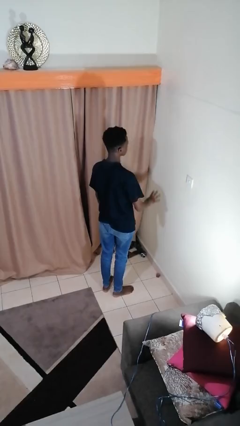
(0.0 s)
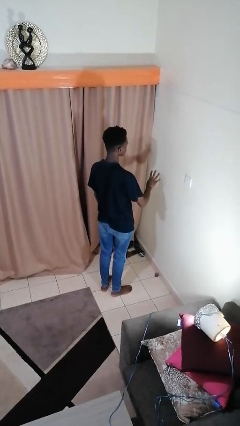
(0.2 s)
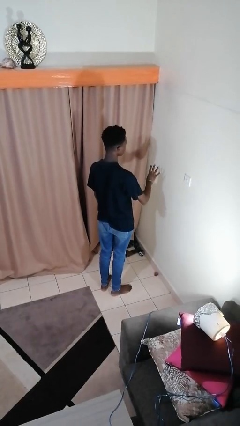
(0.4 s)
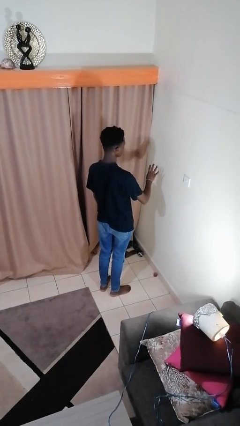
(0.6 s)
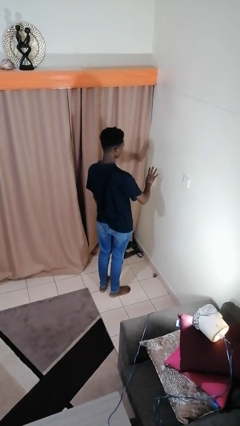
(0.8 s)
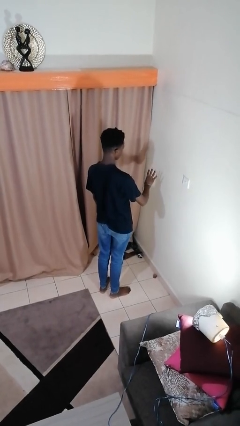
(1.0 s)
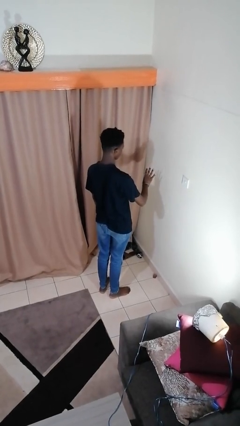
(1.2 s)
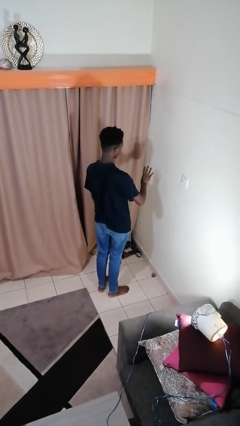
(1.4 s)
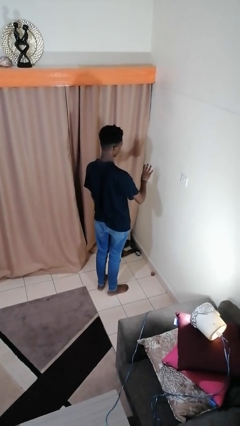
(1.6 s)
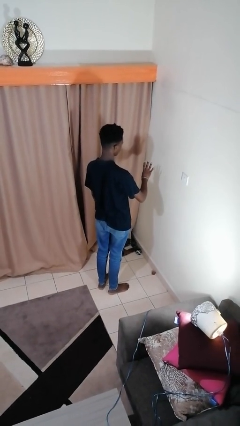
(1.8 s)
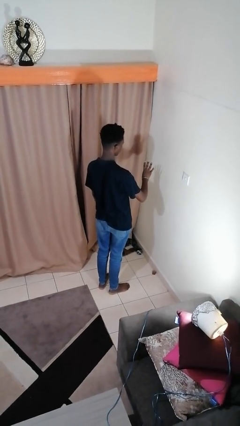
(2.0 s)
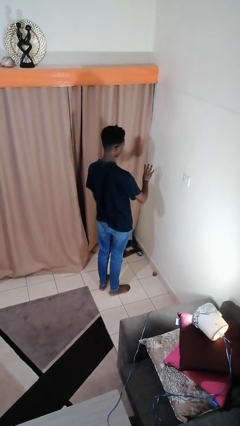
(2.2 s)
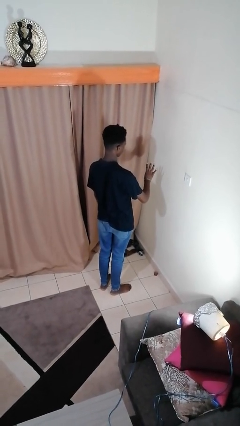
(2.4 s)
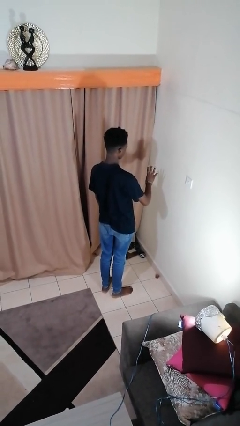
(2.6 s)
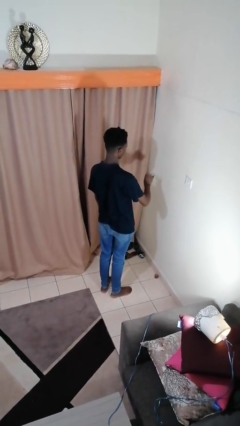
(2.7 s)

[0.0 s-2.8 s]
person gestures number four

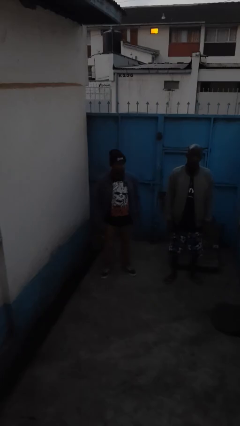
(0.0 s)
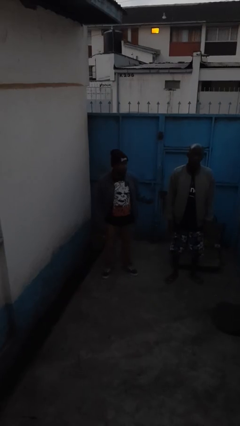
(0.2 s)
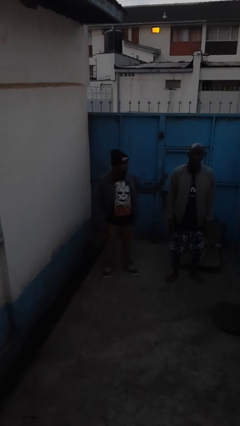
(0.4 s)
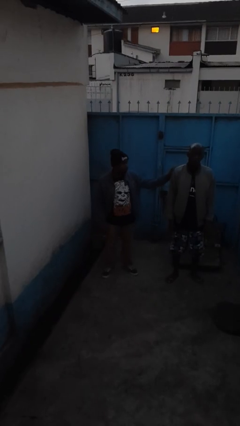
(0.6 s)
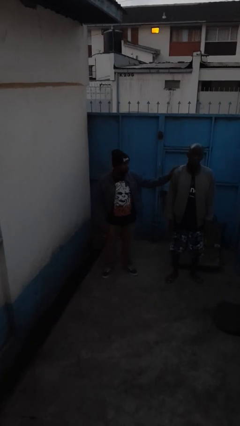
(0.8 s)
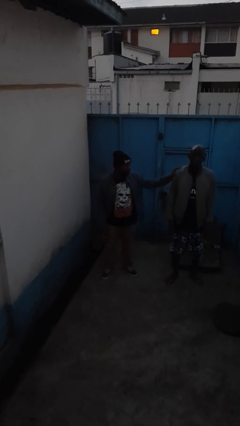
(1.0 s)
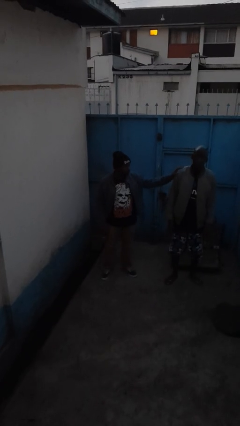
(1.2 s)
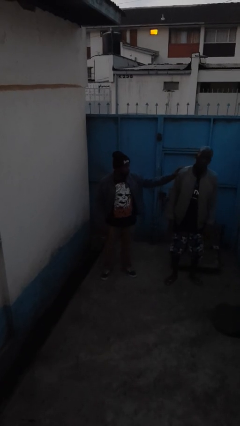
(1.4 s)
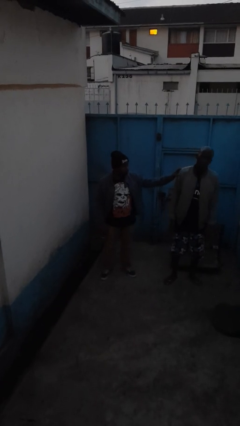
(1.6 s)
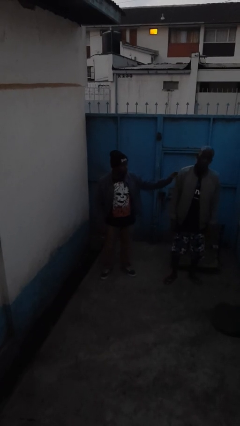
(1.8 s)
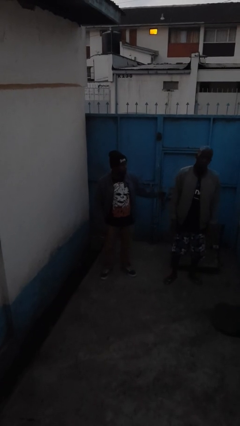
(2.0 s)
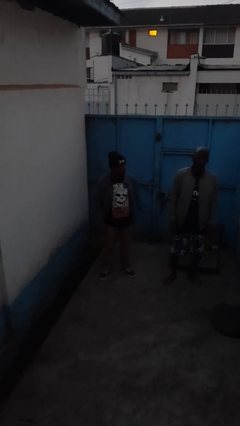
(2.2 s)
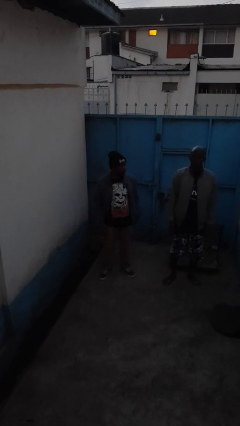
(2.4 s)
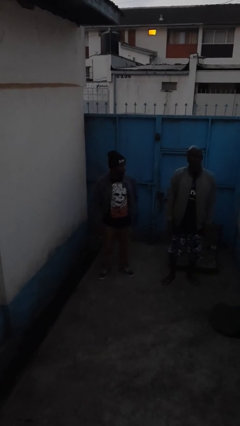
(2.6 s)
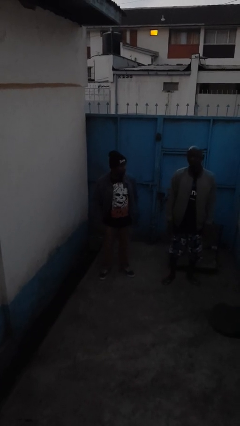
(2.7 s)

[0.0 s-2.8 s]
person shoves person

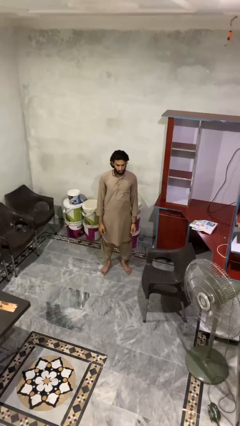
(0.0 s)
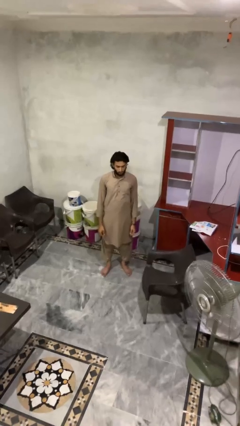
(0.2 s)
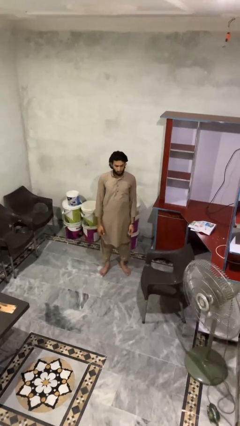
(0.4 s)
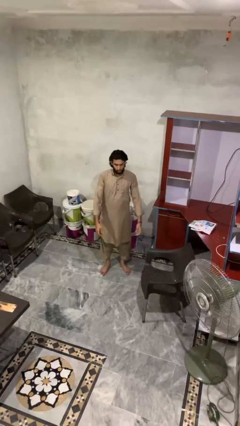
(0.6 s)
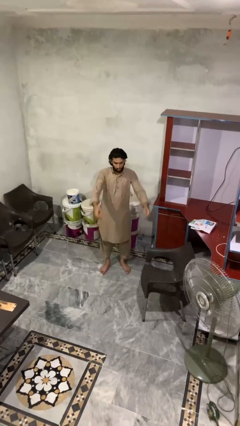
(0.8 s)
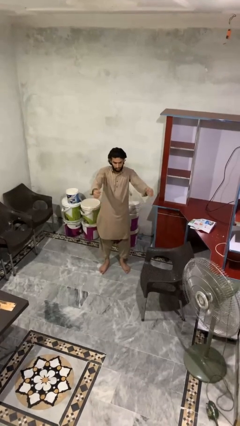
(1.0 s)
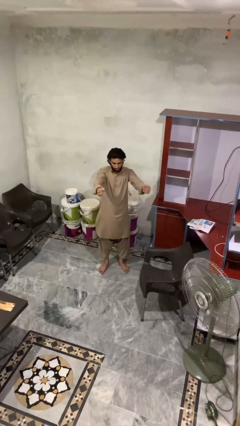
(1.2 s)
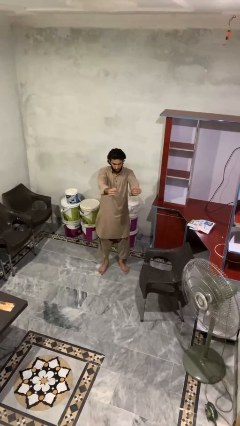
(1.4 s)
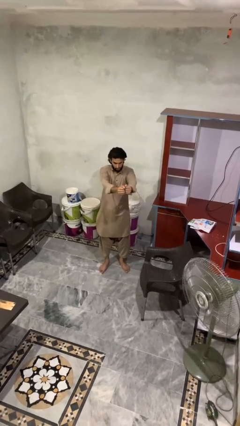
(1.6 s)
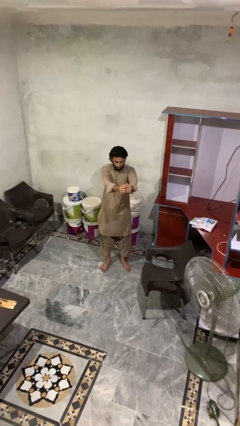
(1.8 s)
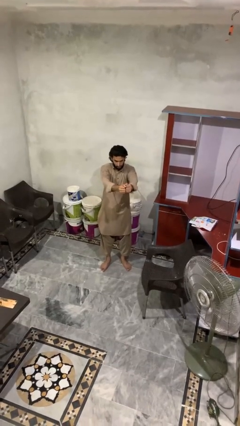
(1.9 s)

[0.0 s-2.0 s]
person gestures zoom out

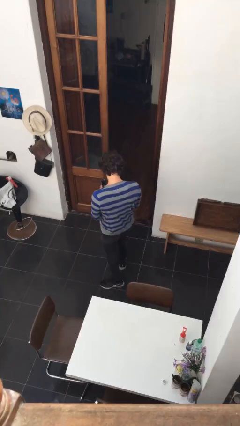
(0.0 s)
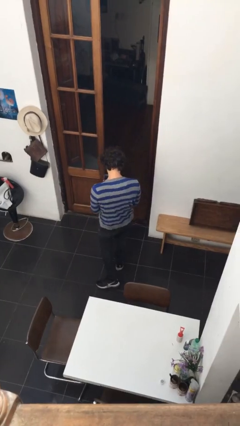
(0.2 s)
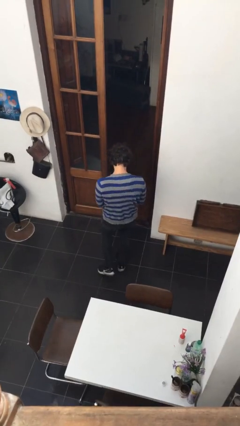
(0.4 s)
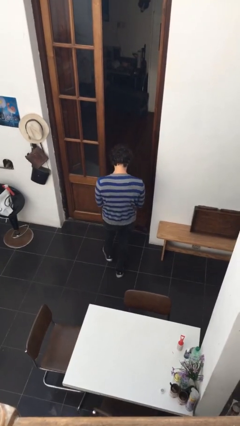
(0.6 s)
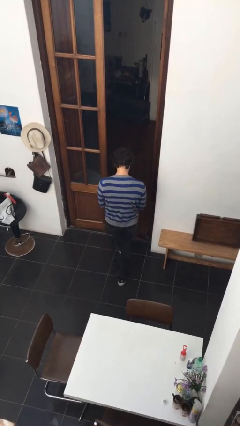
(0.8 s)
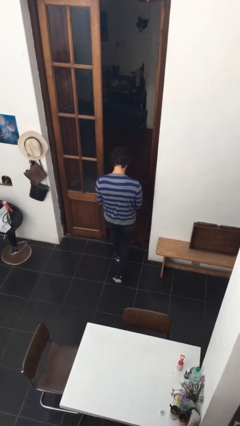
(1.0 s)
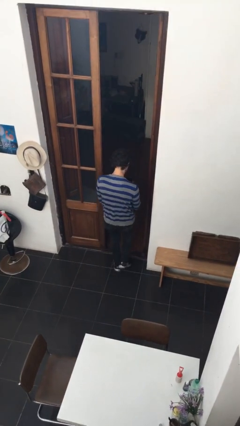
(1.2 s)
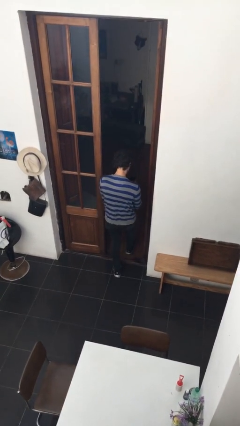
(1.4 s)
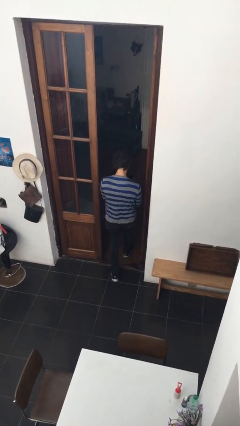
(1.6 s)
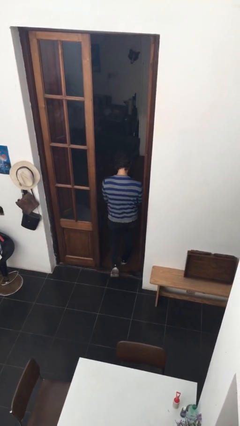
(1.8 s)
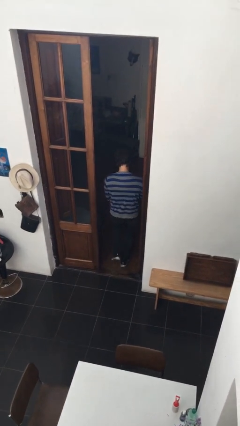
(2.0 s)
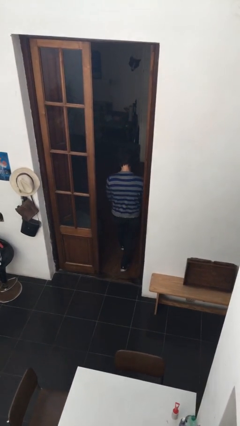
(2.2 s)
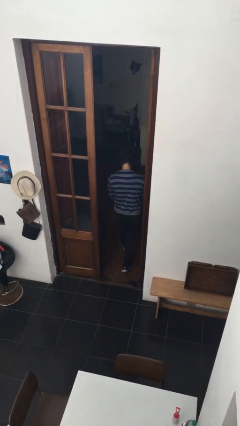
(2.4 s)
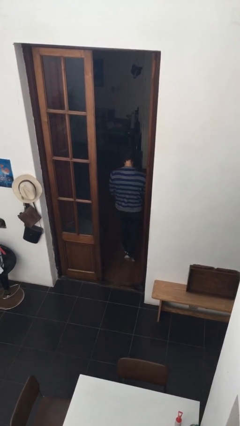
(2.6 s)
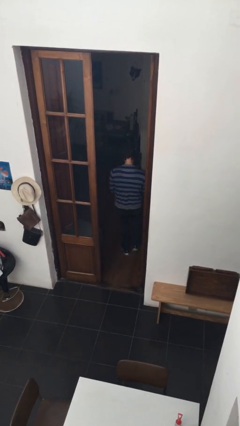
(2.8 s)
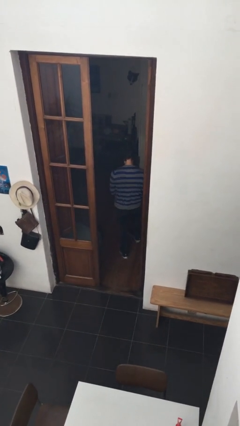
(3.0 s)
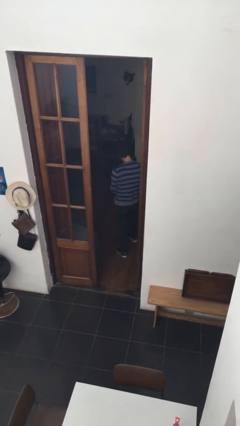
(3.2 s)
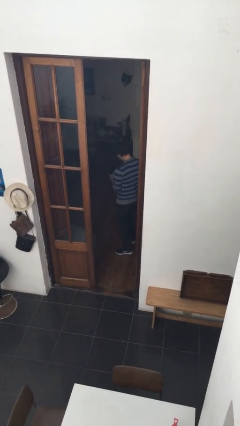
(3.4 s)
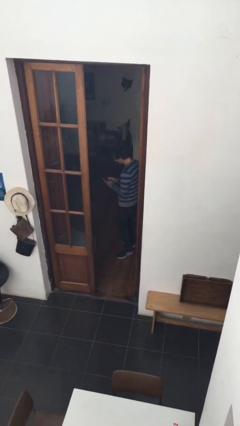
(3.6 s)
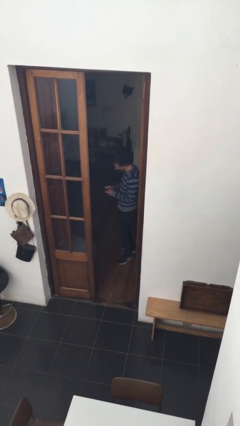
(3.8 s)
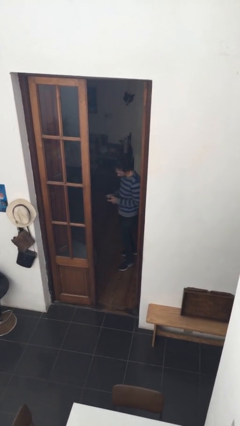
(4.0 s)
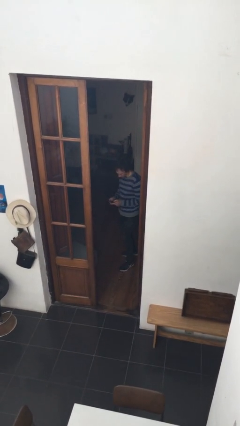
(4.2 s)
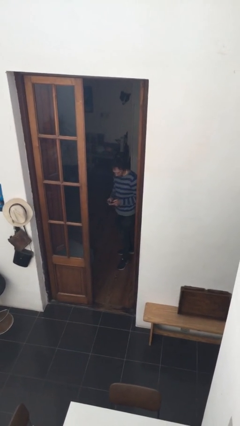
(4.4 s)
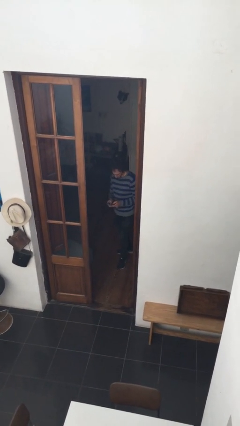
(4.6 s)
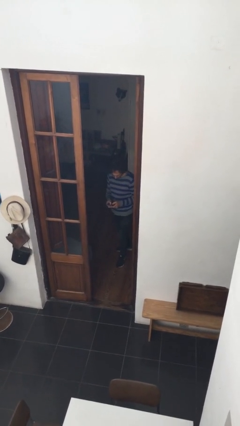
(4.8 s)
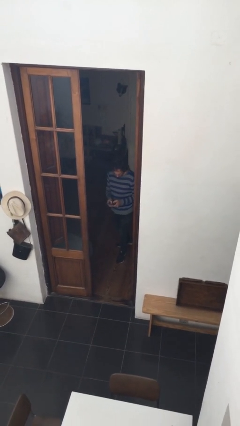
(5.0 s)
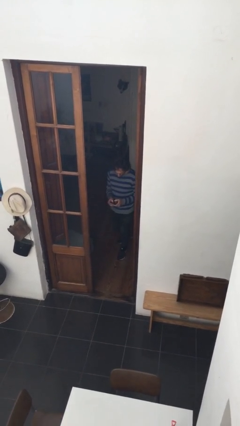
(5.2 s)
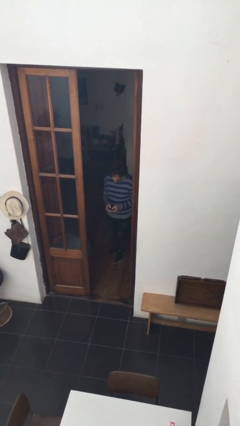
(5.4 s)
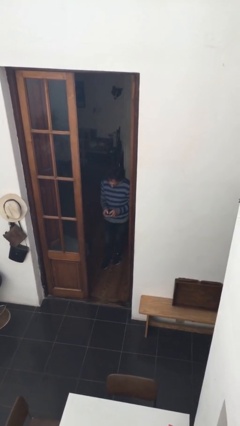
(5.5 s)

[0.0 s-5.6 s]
person exits scene through structure

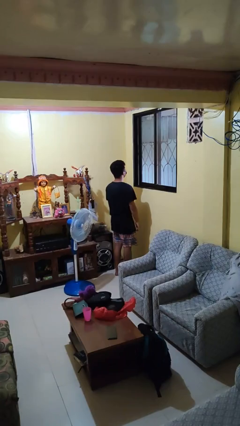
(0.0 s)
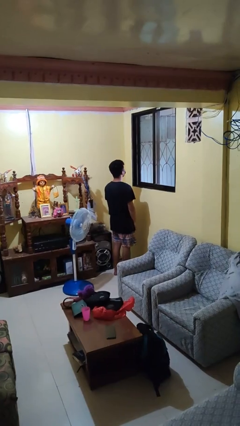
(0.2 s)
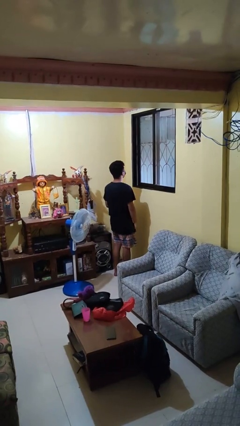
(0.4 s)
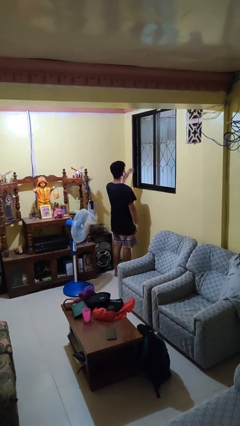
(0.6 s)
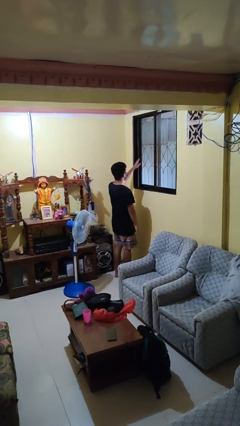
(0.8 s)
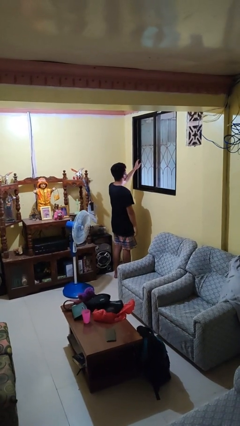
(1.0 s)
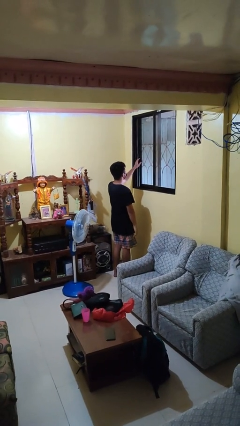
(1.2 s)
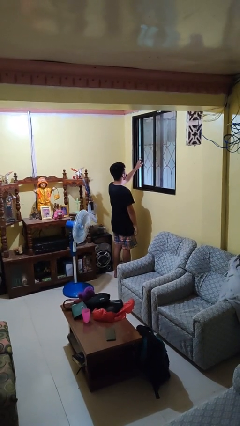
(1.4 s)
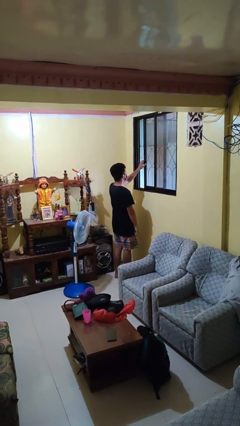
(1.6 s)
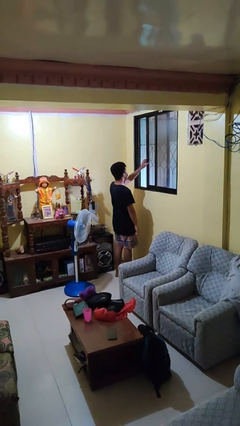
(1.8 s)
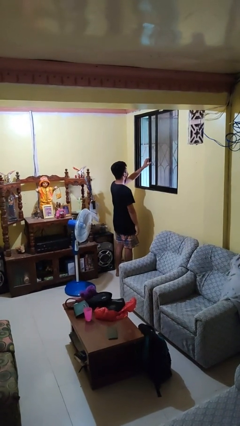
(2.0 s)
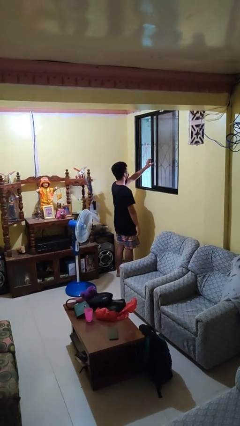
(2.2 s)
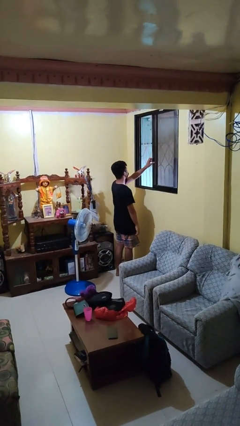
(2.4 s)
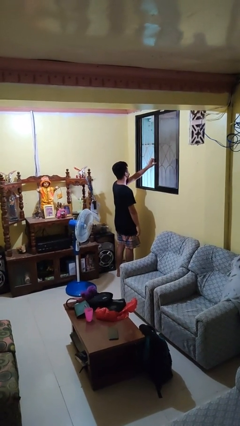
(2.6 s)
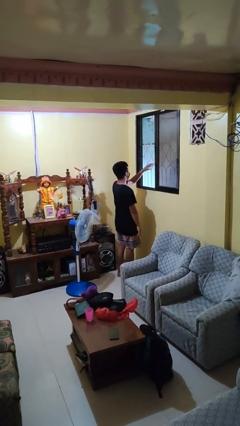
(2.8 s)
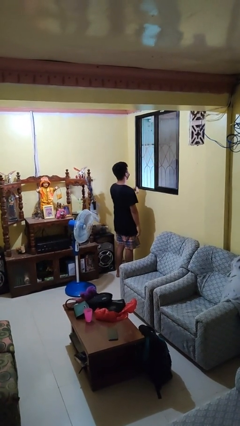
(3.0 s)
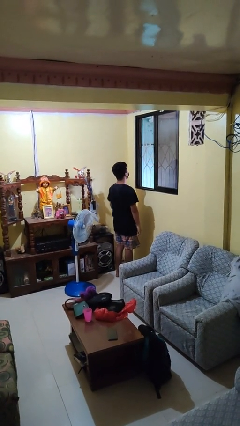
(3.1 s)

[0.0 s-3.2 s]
person opens home window

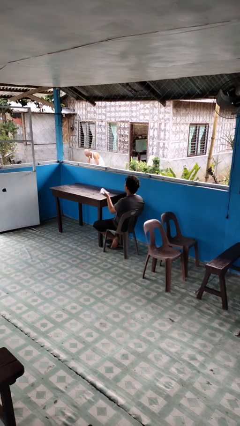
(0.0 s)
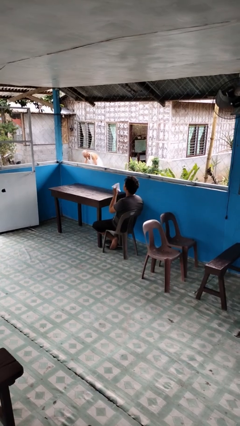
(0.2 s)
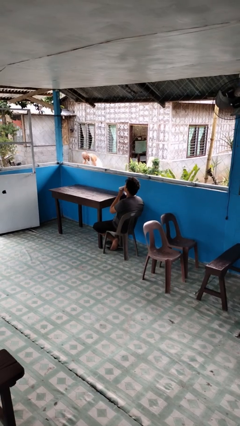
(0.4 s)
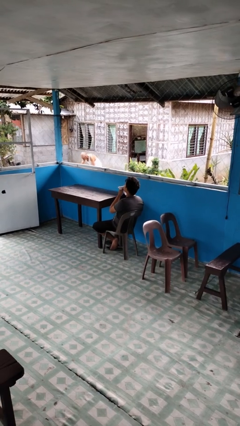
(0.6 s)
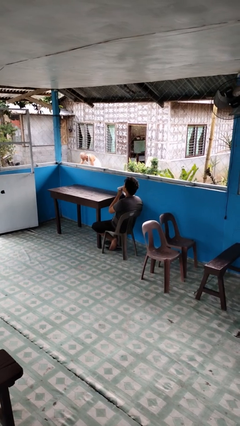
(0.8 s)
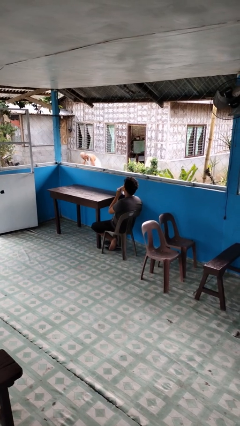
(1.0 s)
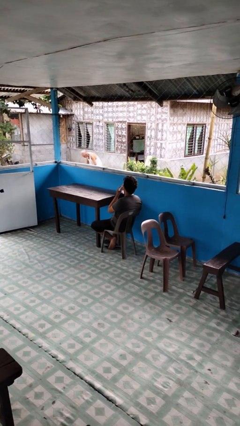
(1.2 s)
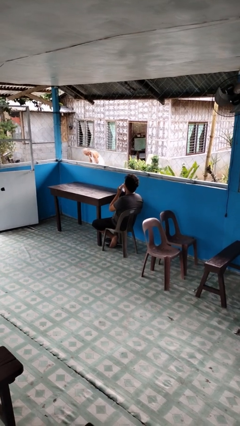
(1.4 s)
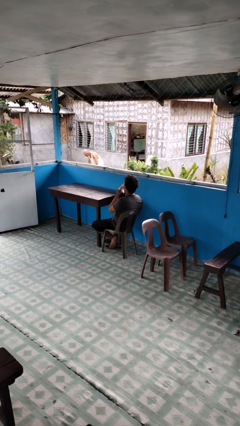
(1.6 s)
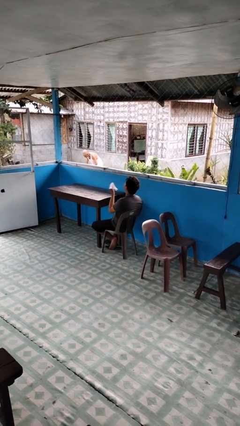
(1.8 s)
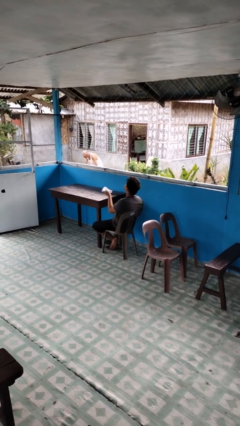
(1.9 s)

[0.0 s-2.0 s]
person wipes mouth with napkin
